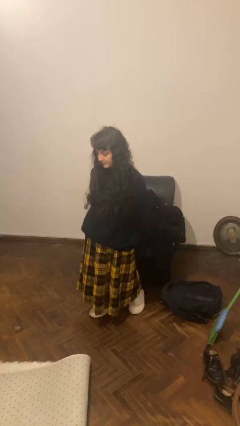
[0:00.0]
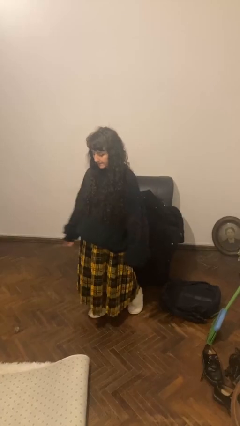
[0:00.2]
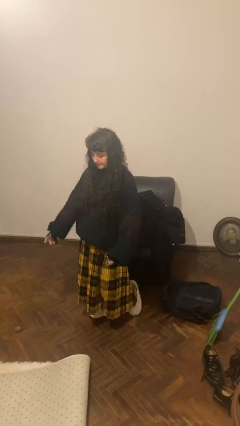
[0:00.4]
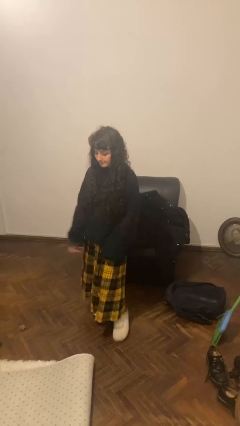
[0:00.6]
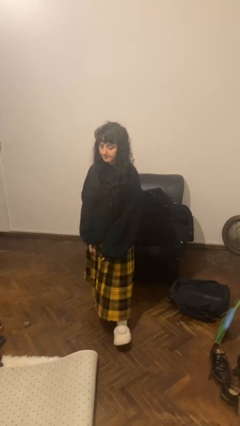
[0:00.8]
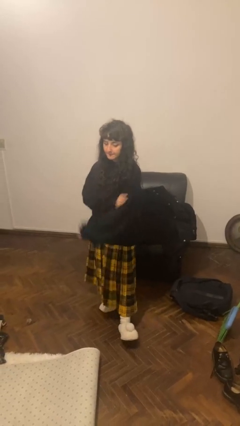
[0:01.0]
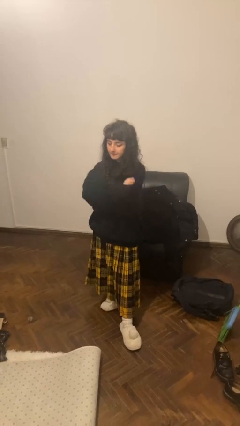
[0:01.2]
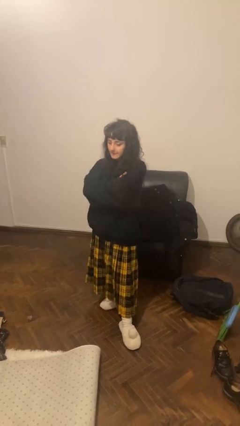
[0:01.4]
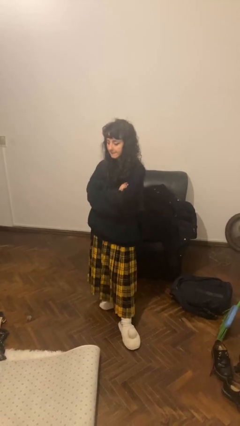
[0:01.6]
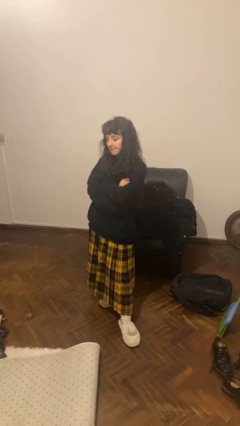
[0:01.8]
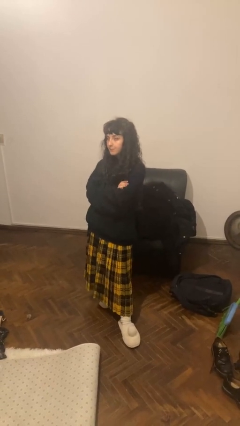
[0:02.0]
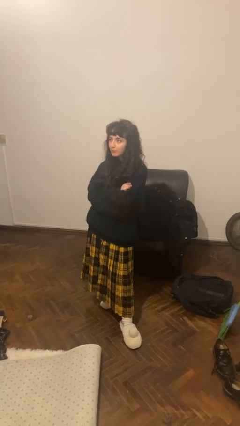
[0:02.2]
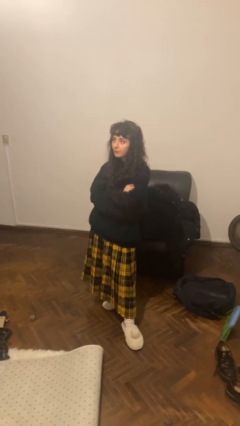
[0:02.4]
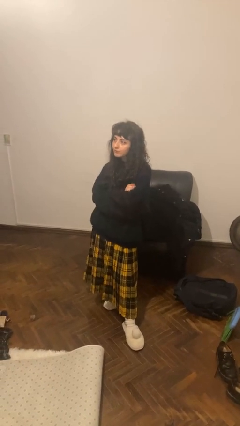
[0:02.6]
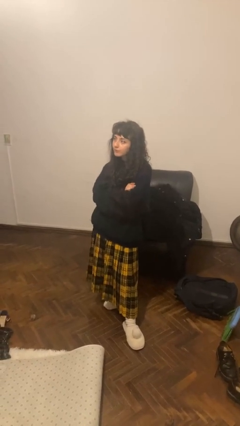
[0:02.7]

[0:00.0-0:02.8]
person crosses arms

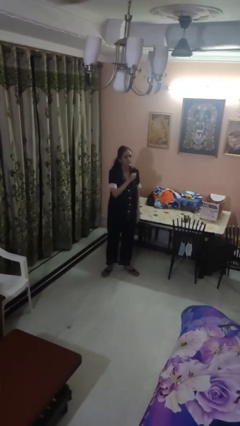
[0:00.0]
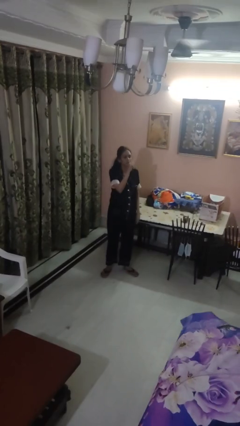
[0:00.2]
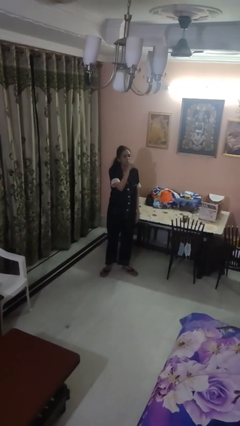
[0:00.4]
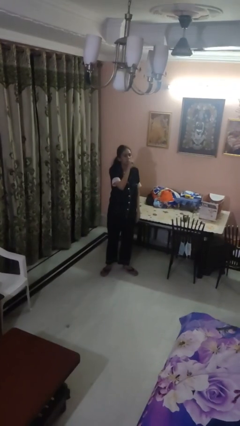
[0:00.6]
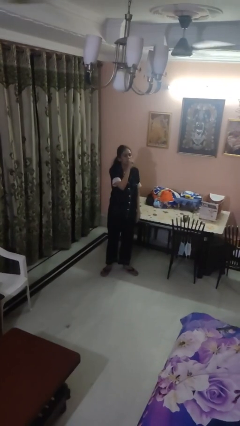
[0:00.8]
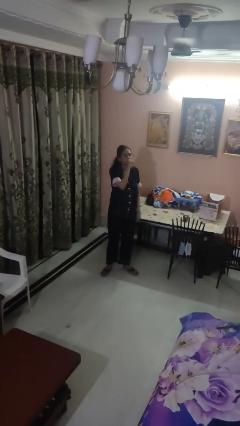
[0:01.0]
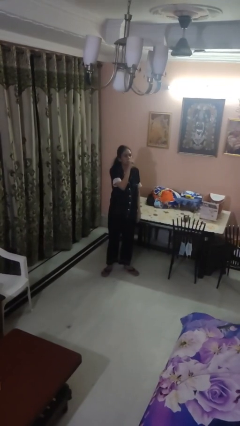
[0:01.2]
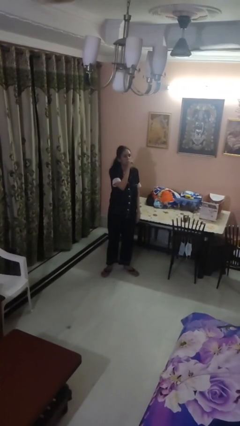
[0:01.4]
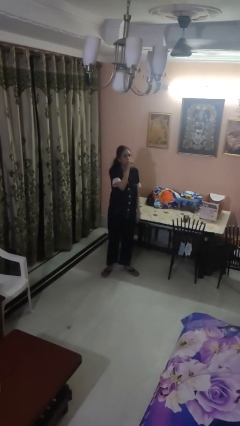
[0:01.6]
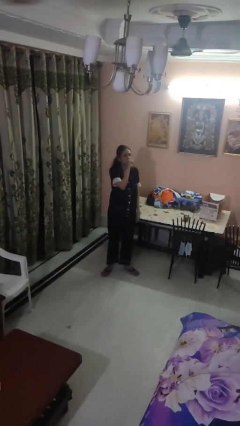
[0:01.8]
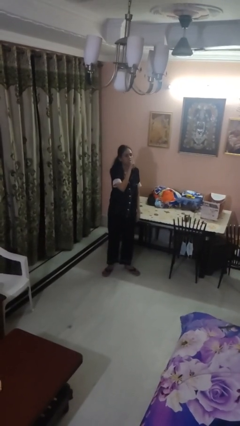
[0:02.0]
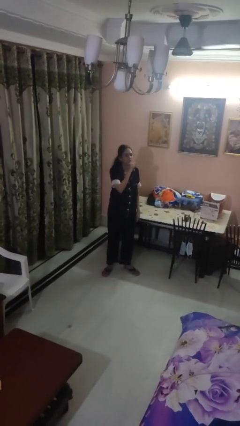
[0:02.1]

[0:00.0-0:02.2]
person vapes

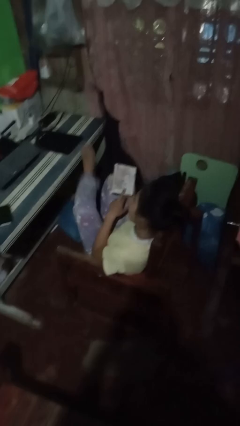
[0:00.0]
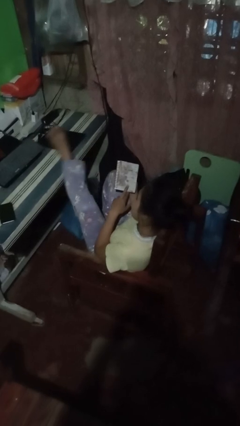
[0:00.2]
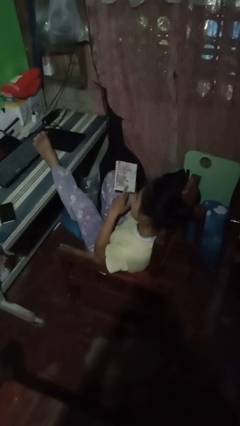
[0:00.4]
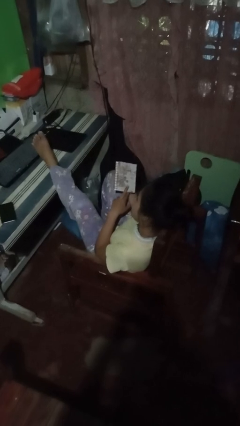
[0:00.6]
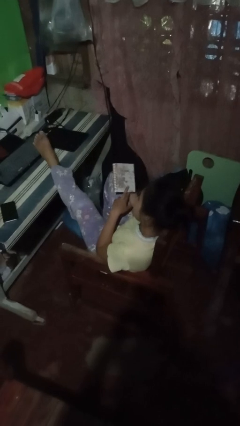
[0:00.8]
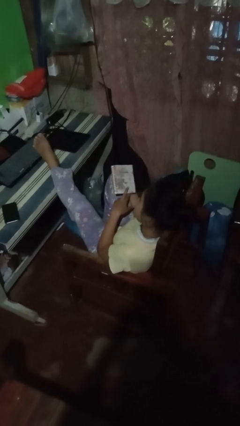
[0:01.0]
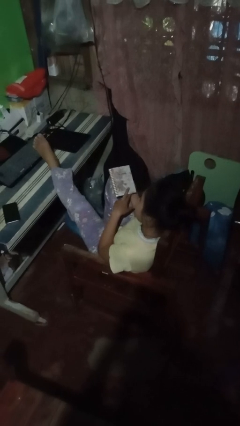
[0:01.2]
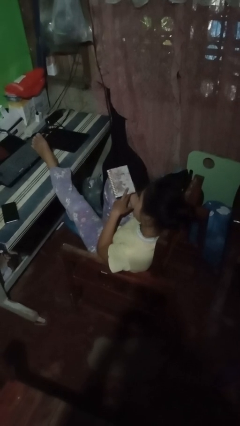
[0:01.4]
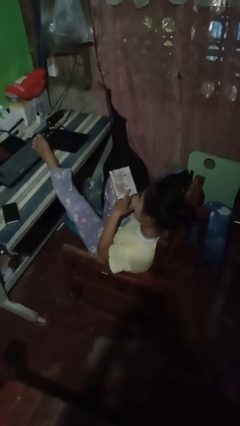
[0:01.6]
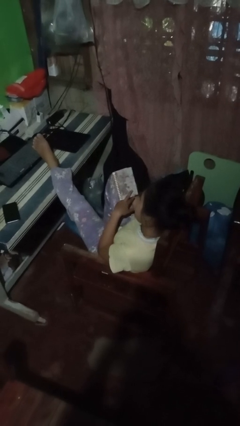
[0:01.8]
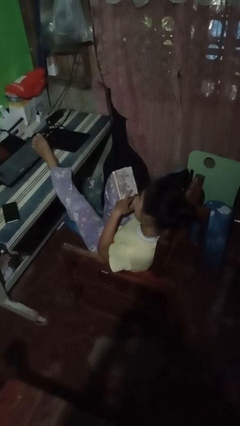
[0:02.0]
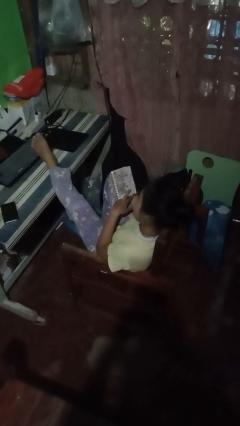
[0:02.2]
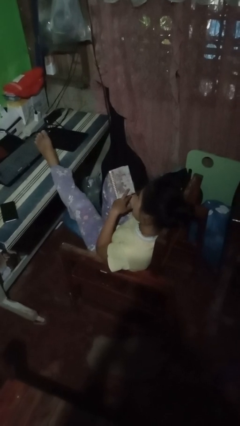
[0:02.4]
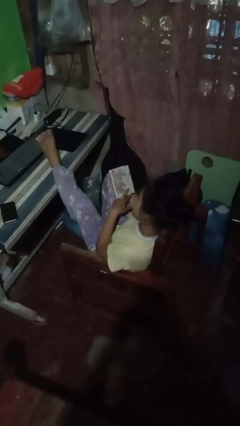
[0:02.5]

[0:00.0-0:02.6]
person puts feet up

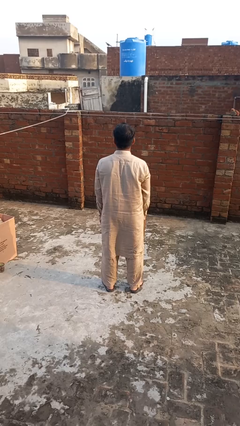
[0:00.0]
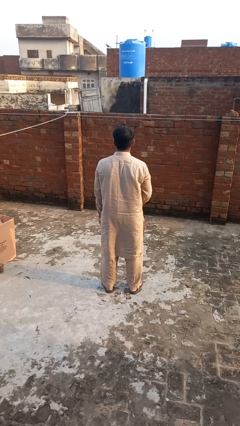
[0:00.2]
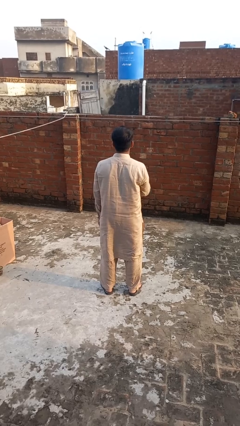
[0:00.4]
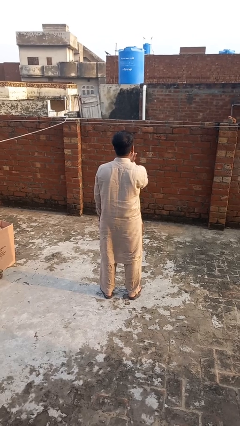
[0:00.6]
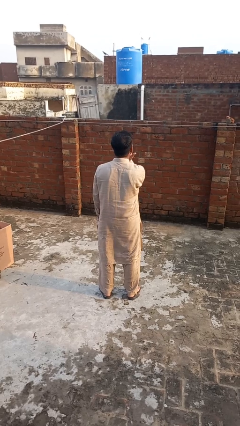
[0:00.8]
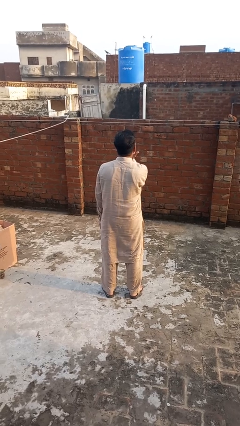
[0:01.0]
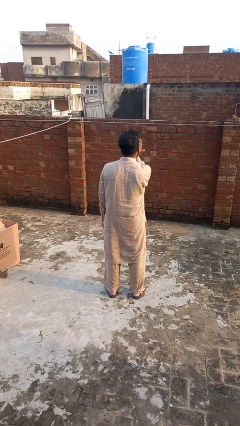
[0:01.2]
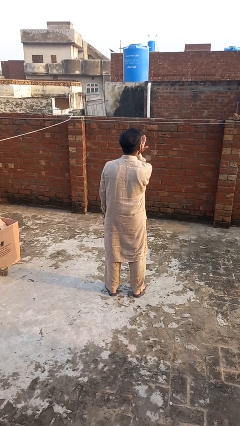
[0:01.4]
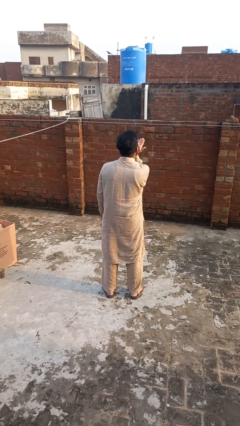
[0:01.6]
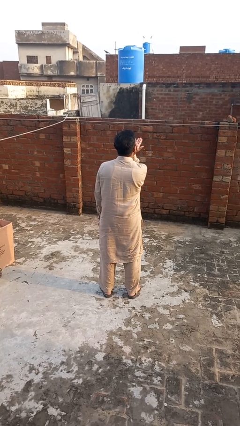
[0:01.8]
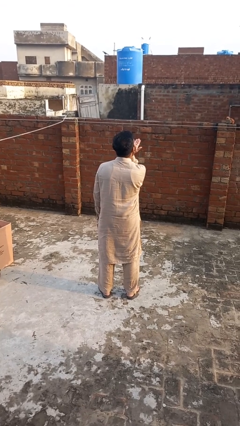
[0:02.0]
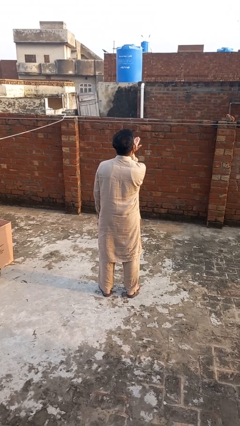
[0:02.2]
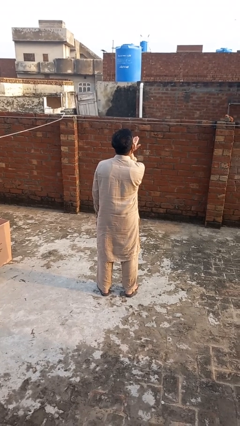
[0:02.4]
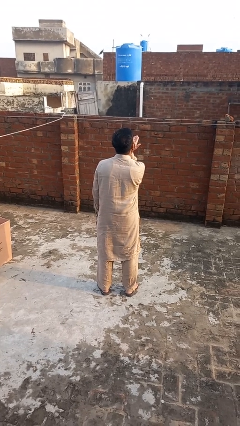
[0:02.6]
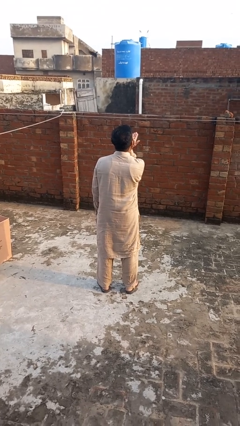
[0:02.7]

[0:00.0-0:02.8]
person gestures blow kiss

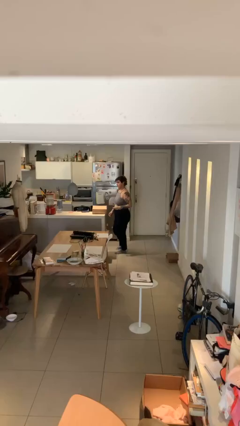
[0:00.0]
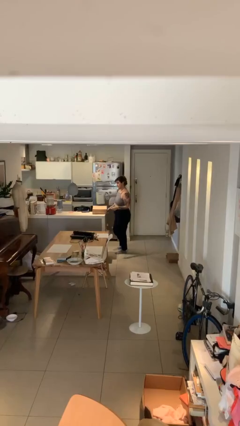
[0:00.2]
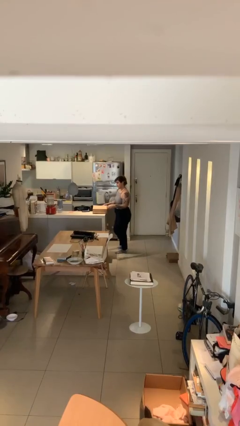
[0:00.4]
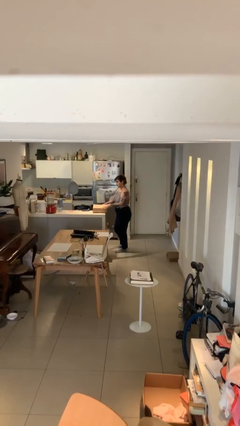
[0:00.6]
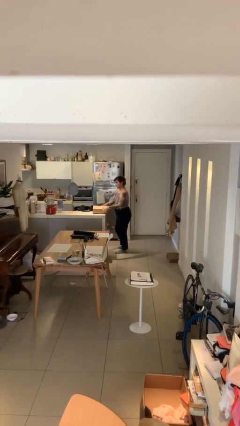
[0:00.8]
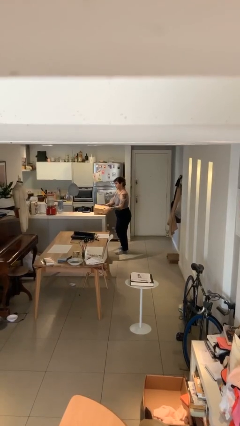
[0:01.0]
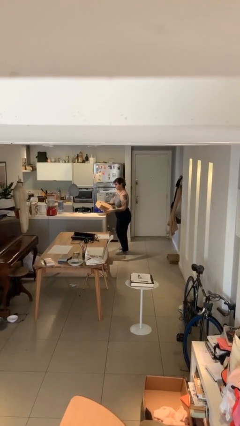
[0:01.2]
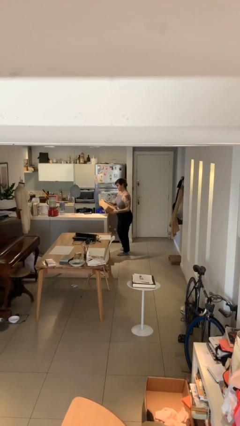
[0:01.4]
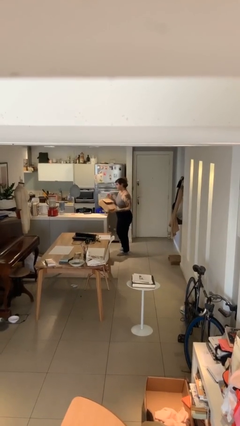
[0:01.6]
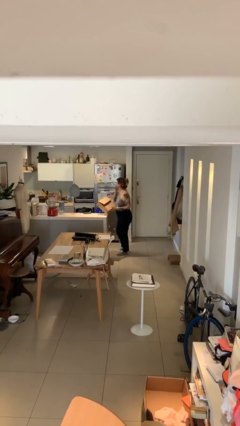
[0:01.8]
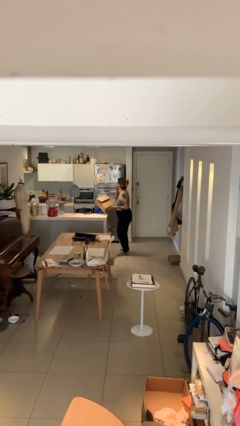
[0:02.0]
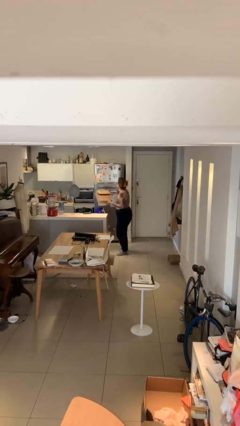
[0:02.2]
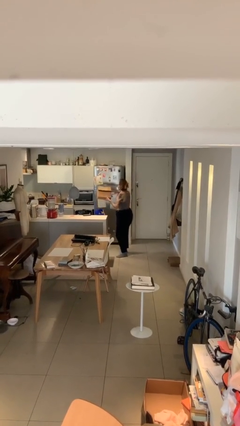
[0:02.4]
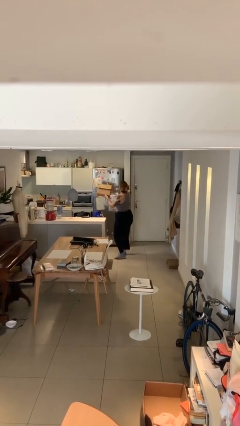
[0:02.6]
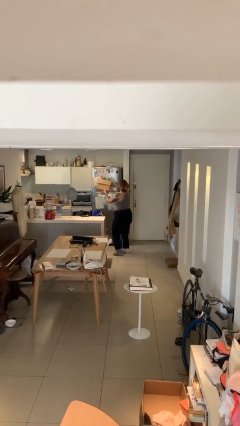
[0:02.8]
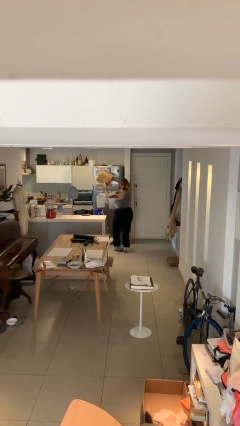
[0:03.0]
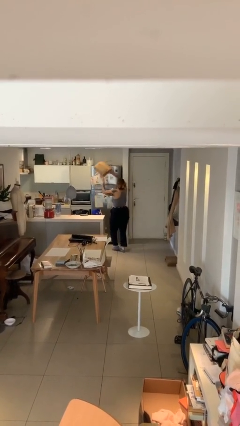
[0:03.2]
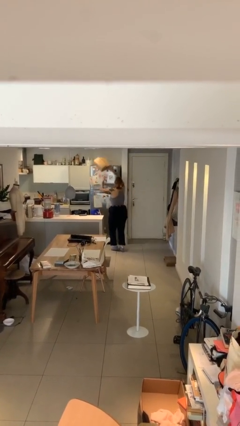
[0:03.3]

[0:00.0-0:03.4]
person picks up object from table

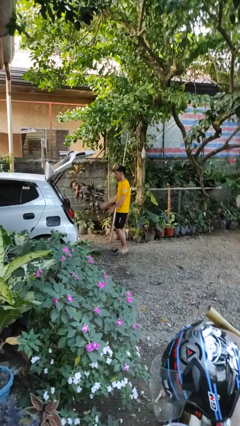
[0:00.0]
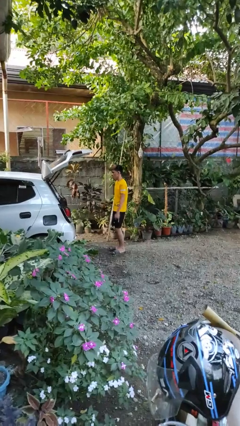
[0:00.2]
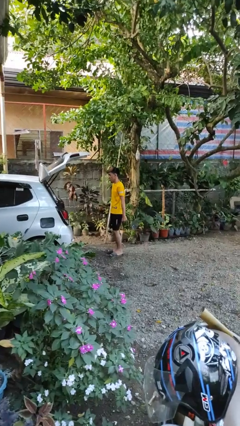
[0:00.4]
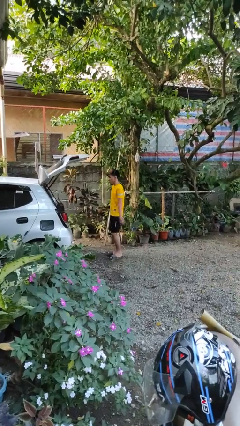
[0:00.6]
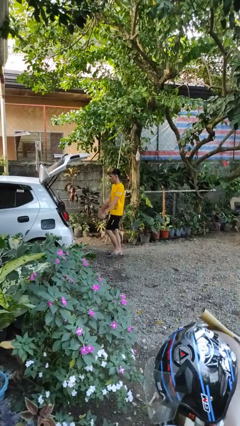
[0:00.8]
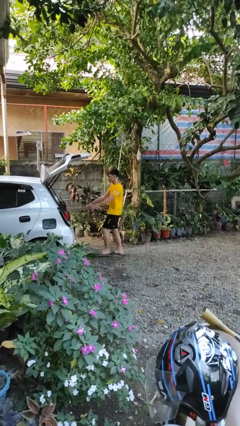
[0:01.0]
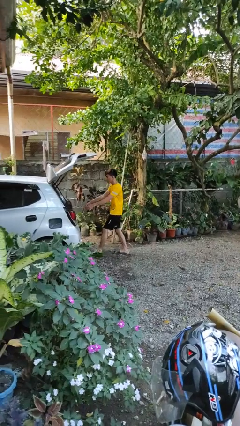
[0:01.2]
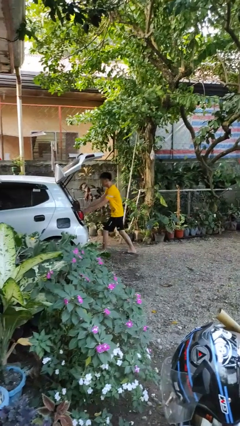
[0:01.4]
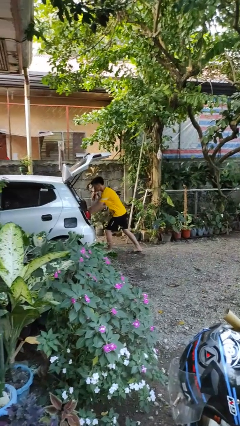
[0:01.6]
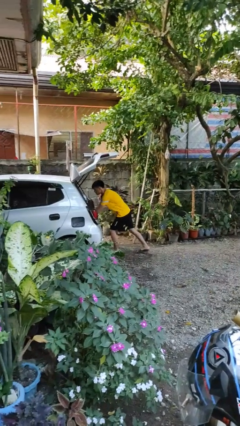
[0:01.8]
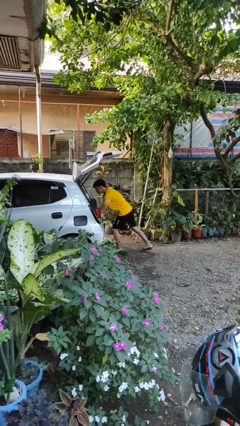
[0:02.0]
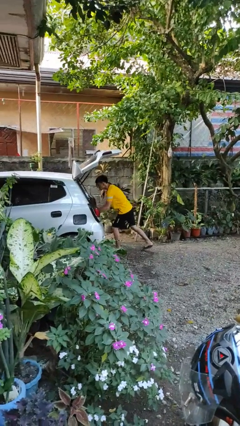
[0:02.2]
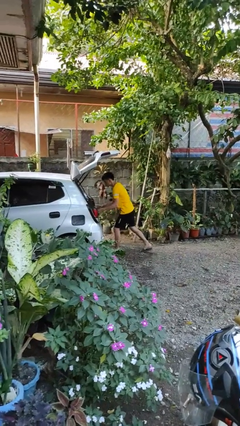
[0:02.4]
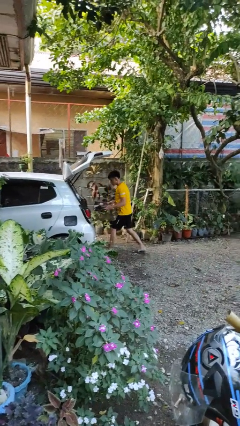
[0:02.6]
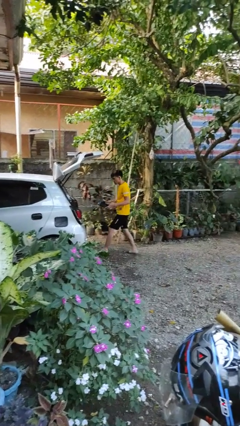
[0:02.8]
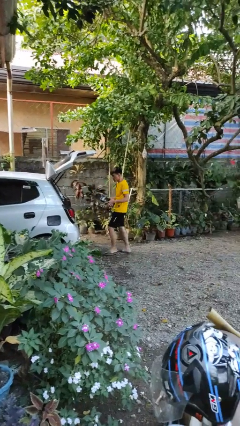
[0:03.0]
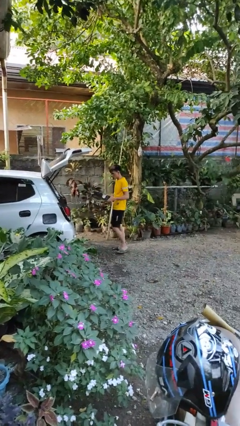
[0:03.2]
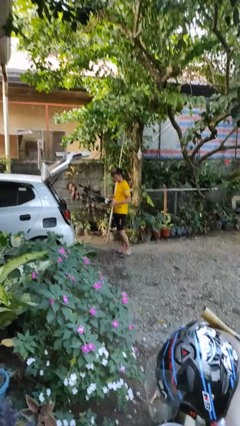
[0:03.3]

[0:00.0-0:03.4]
person unloads car
